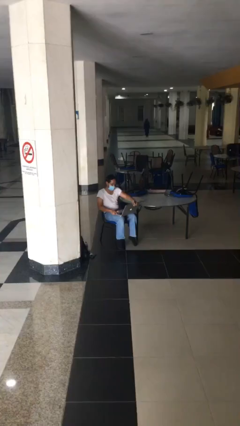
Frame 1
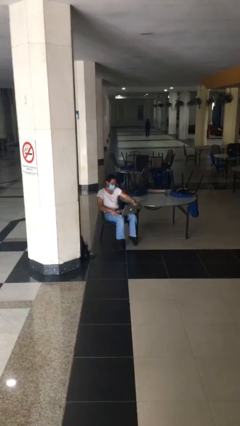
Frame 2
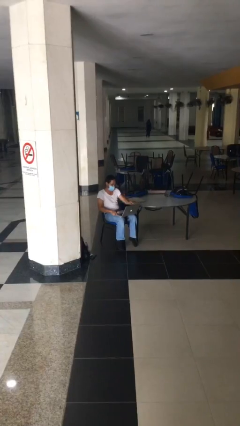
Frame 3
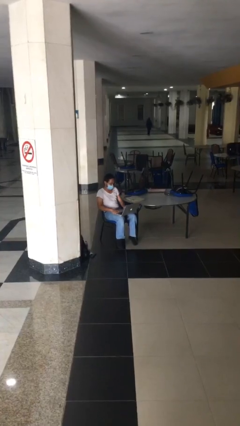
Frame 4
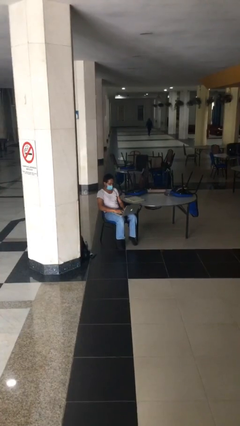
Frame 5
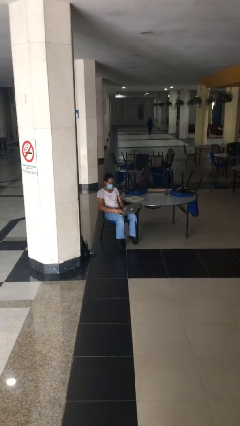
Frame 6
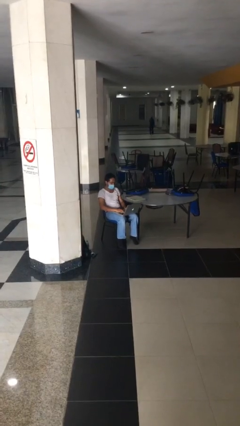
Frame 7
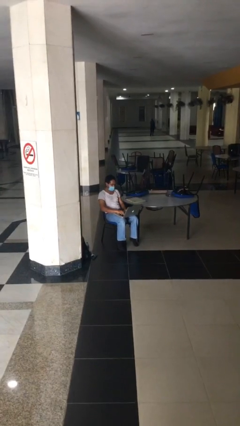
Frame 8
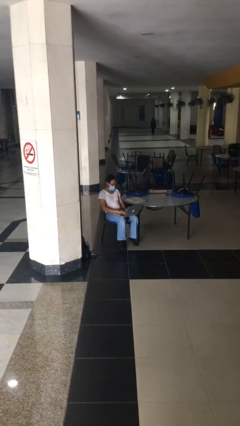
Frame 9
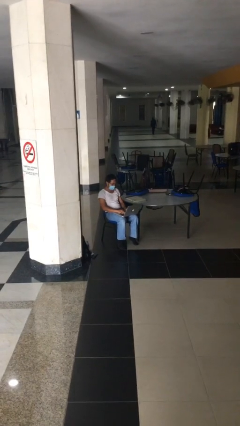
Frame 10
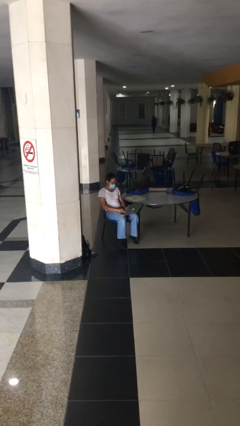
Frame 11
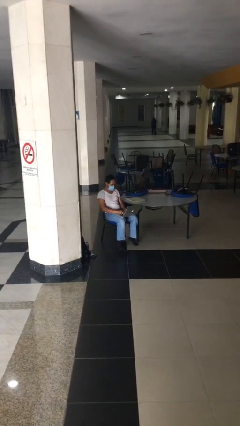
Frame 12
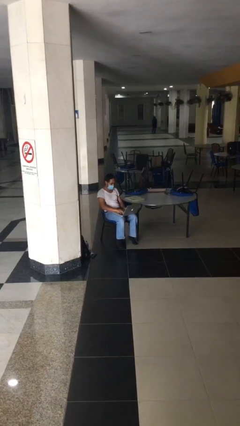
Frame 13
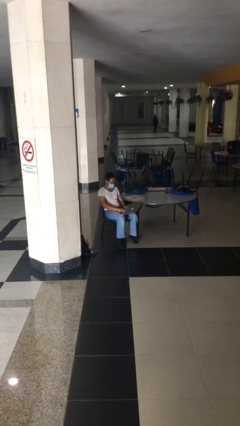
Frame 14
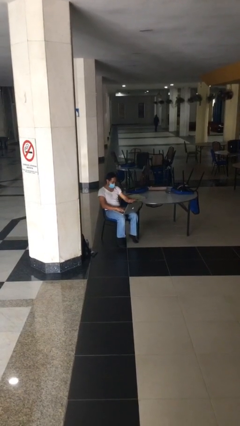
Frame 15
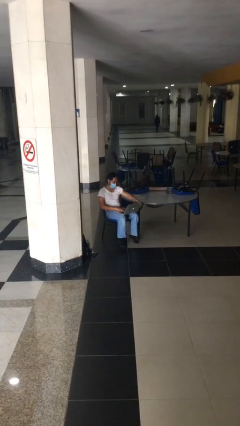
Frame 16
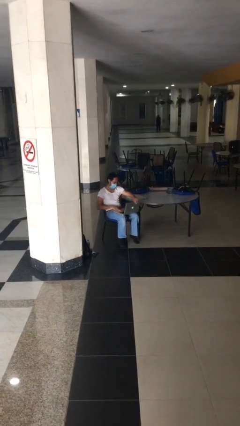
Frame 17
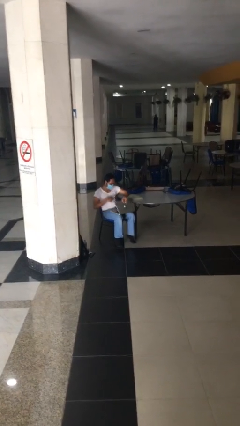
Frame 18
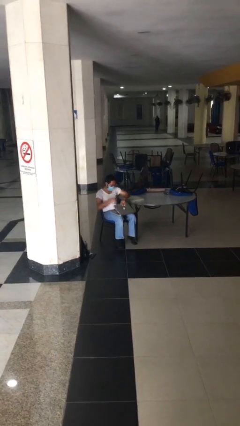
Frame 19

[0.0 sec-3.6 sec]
person interacts with laptop

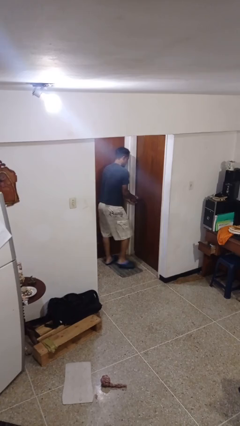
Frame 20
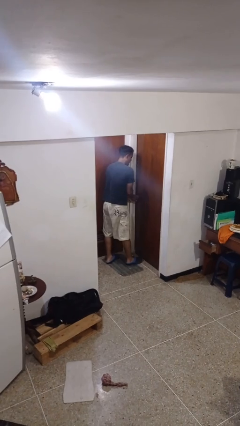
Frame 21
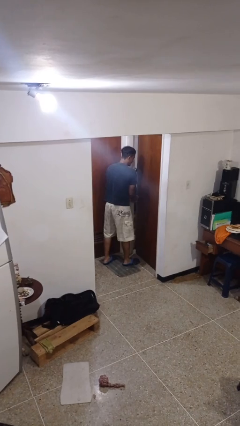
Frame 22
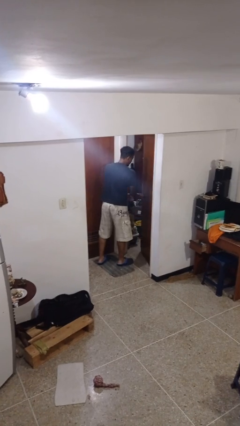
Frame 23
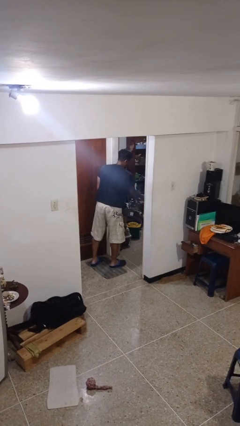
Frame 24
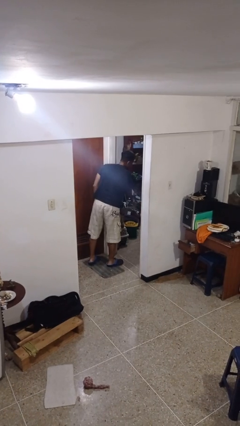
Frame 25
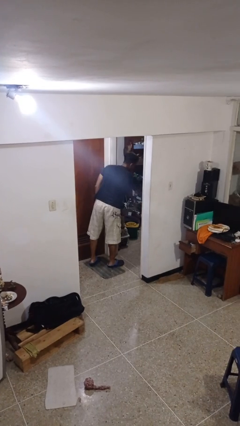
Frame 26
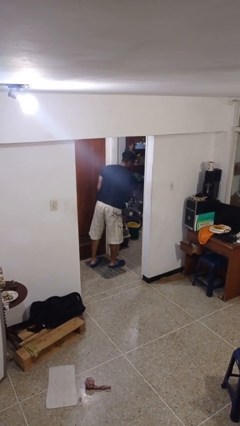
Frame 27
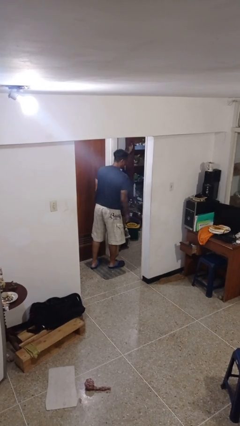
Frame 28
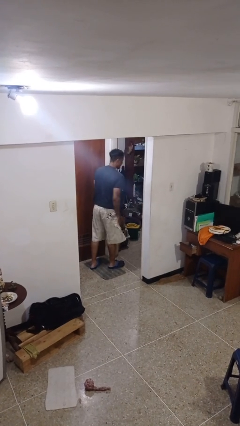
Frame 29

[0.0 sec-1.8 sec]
person opens facility door

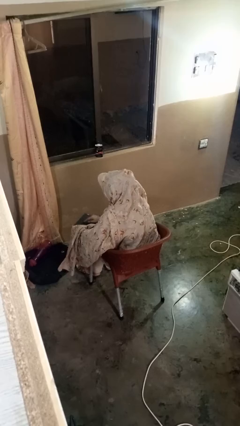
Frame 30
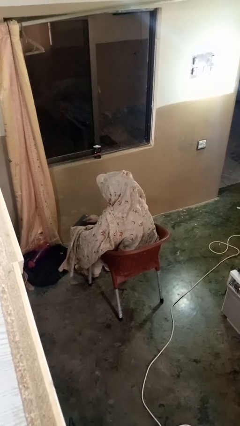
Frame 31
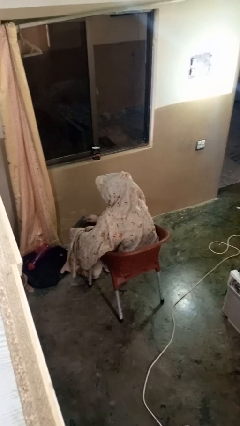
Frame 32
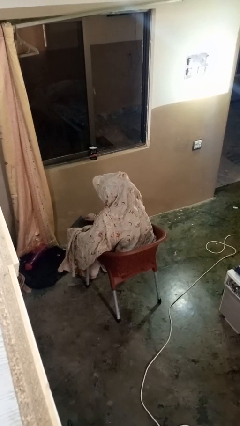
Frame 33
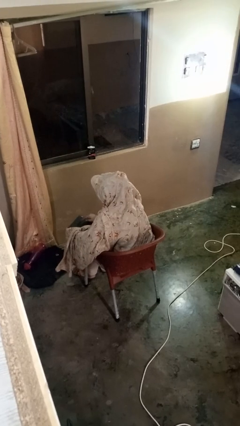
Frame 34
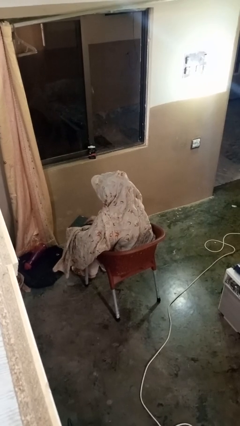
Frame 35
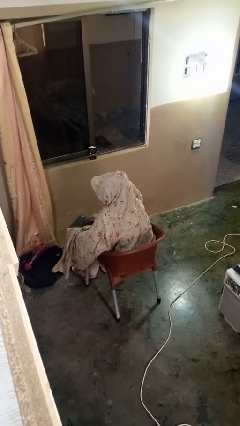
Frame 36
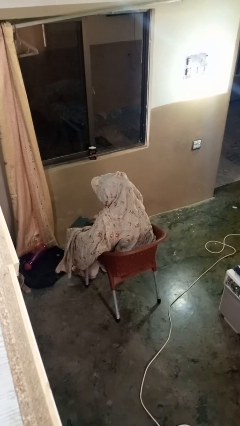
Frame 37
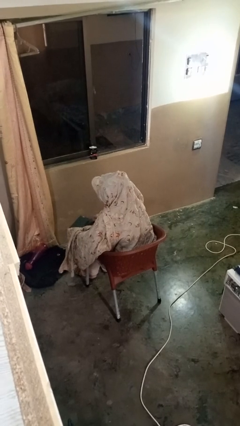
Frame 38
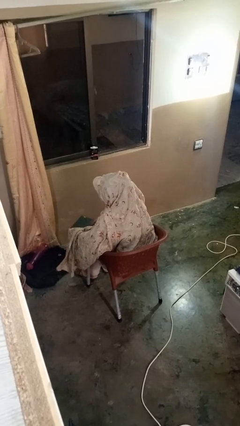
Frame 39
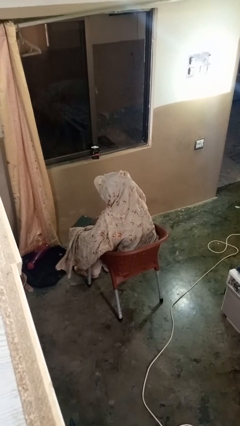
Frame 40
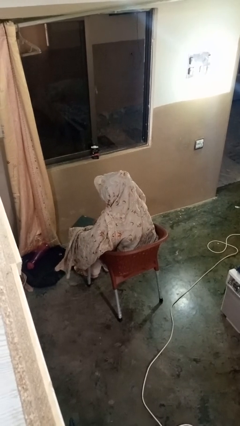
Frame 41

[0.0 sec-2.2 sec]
person interacts with tablet

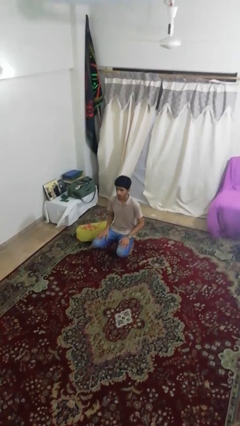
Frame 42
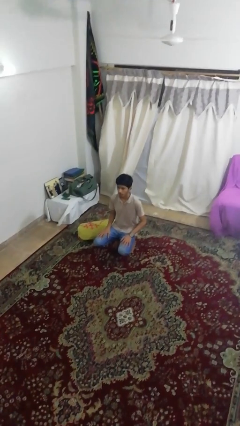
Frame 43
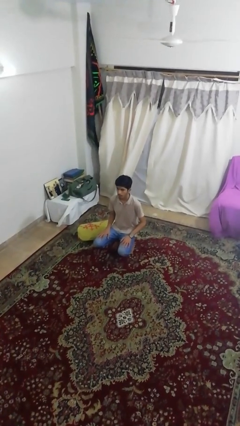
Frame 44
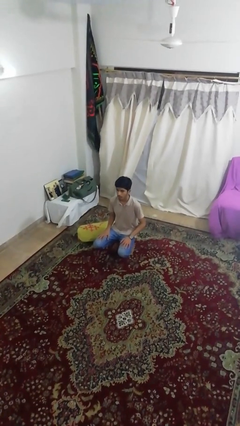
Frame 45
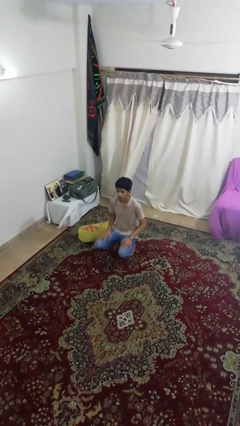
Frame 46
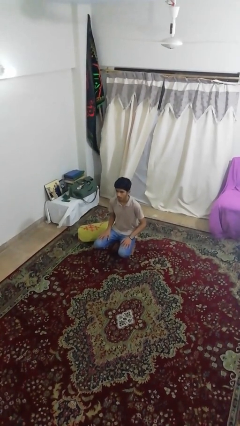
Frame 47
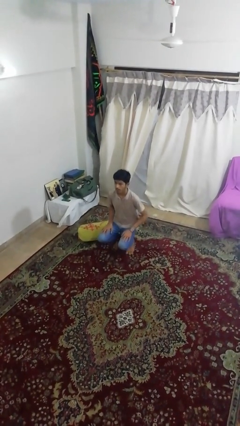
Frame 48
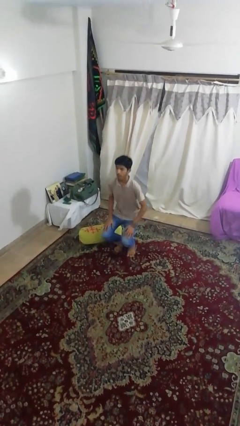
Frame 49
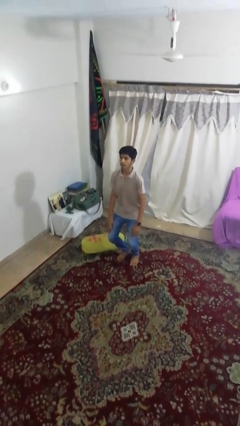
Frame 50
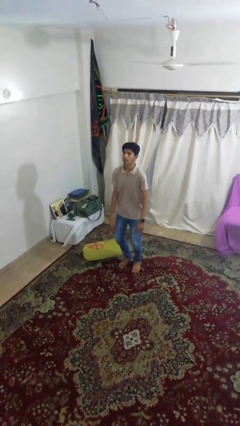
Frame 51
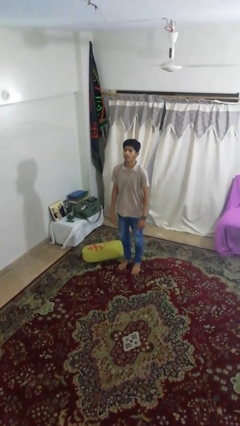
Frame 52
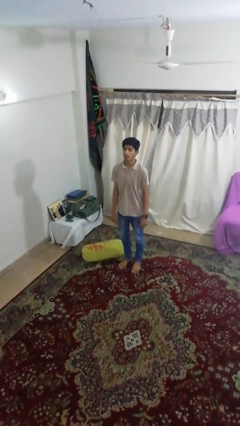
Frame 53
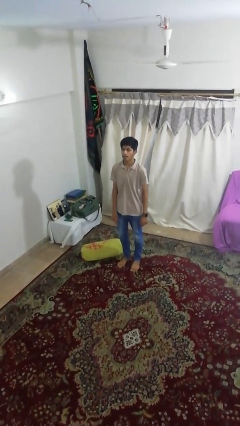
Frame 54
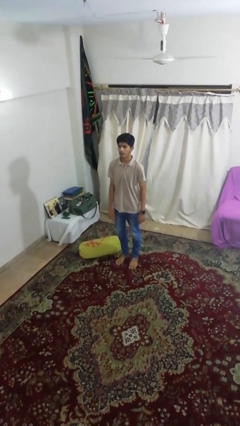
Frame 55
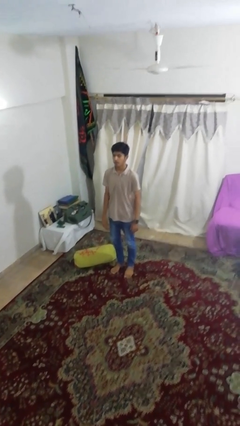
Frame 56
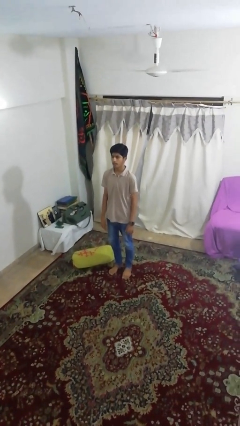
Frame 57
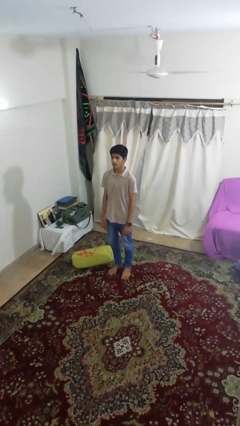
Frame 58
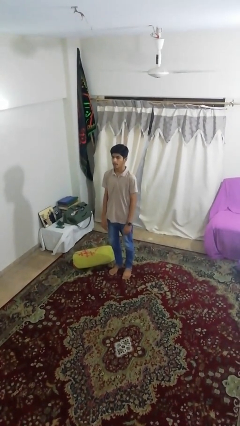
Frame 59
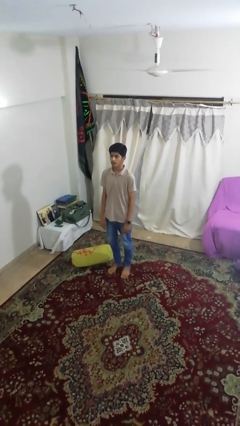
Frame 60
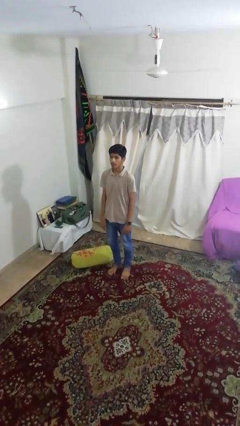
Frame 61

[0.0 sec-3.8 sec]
person stands up

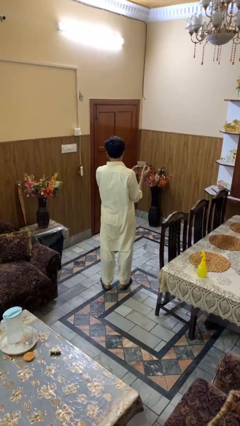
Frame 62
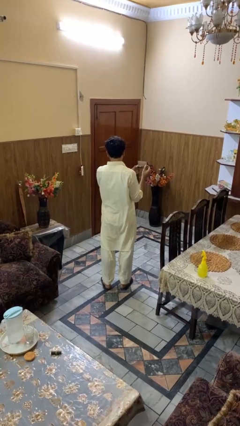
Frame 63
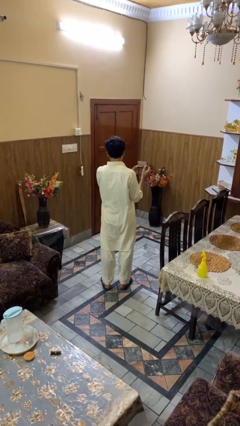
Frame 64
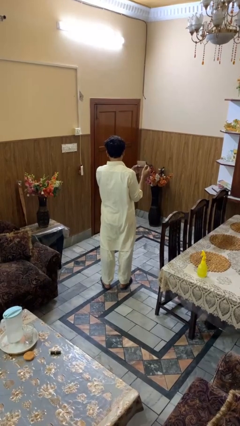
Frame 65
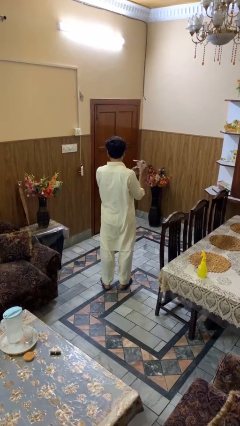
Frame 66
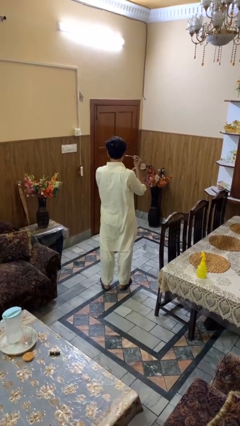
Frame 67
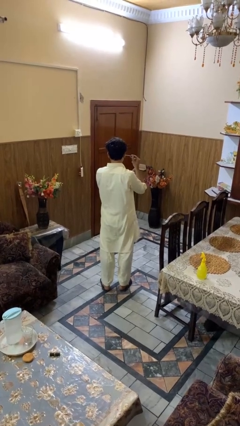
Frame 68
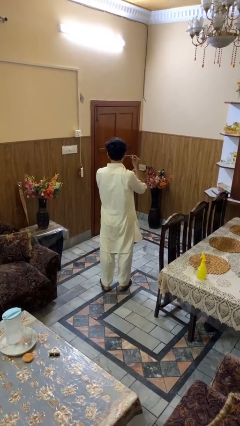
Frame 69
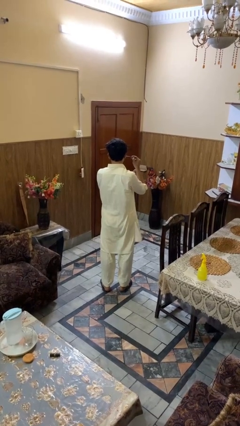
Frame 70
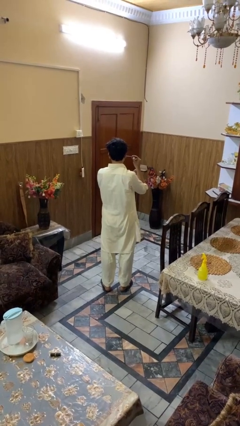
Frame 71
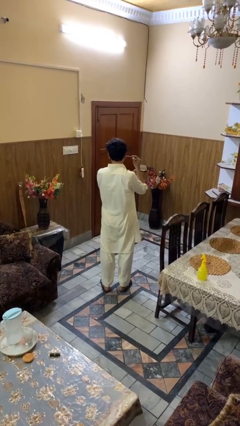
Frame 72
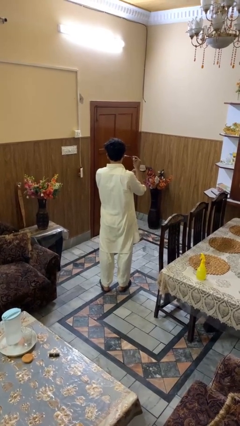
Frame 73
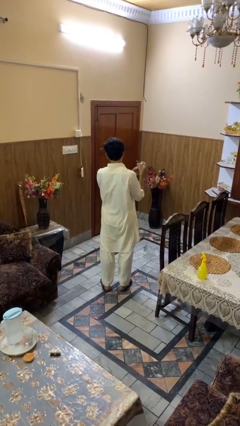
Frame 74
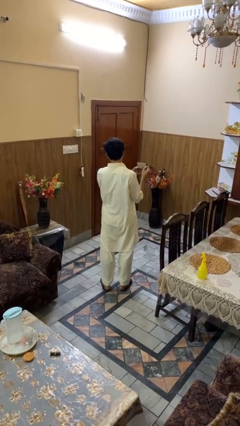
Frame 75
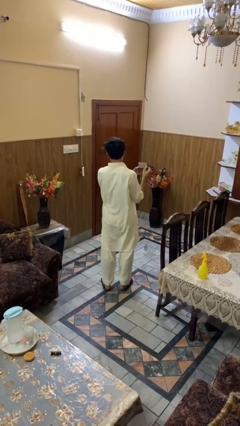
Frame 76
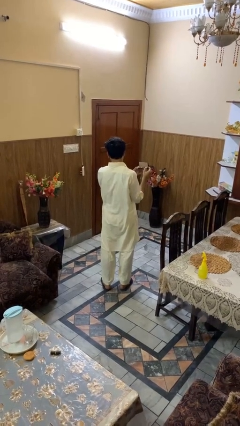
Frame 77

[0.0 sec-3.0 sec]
person applies eye makeup

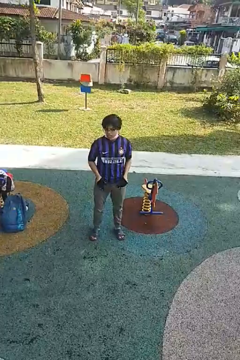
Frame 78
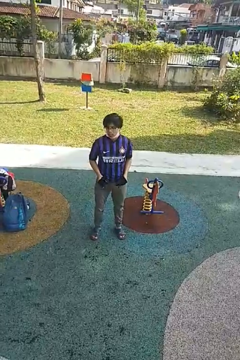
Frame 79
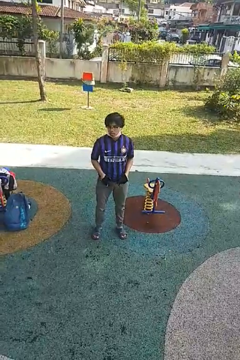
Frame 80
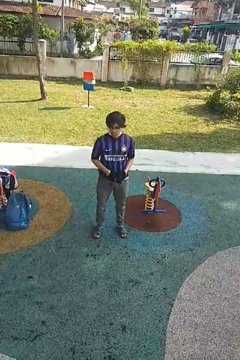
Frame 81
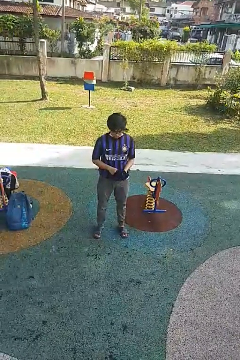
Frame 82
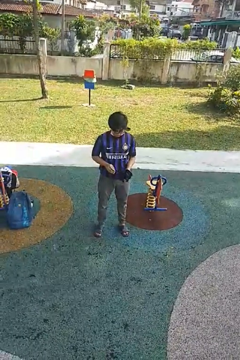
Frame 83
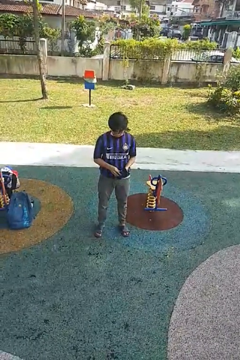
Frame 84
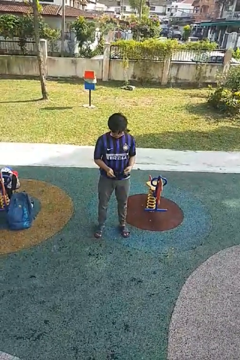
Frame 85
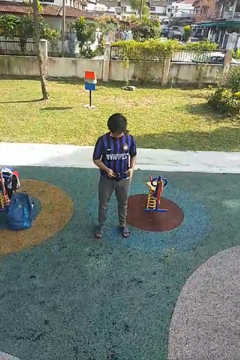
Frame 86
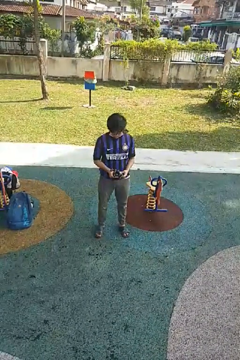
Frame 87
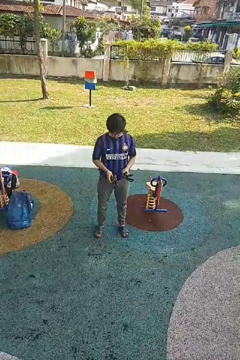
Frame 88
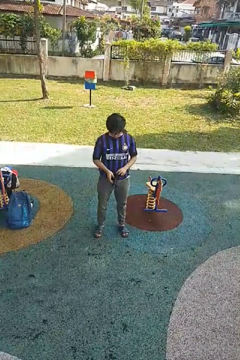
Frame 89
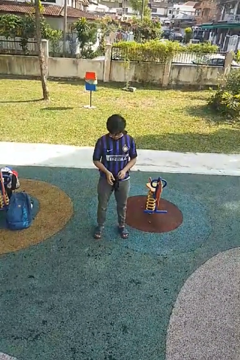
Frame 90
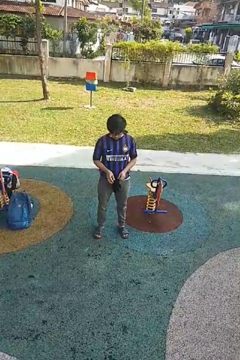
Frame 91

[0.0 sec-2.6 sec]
person takes off gloves

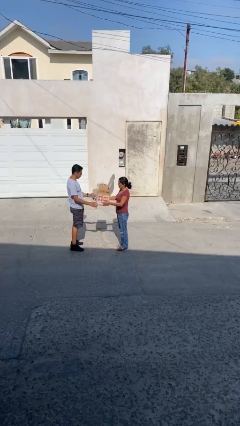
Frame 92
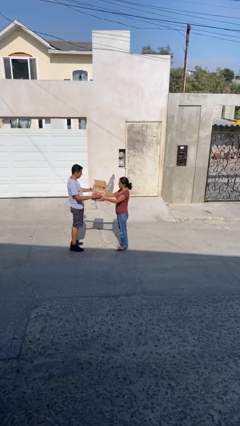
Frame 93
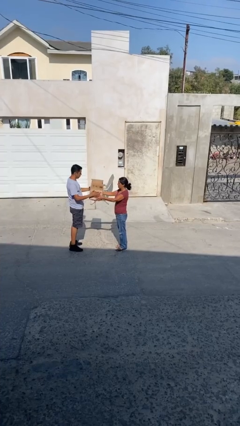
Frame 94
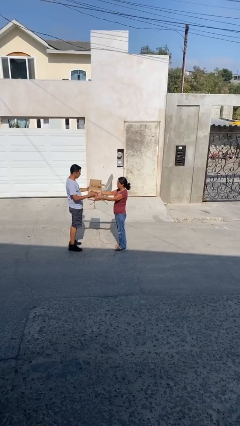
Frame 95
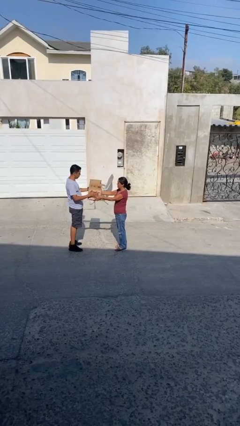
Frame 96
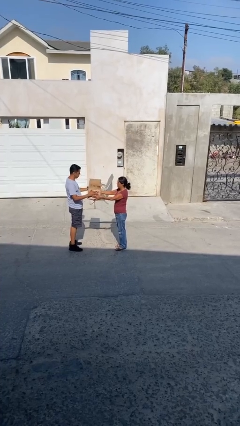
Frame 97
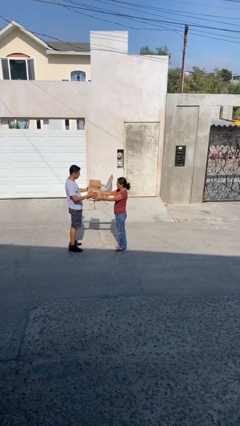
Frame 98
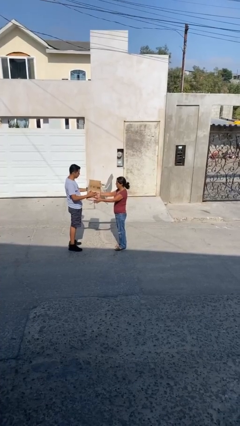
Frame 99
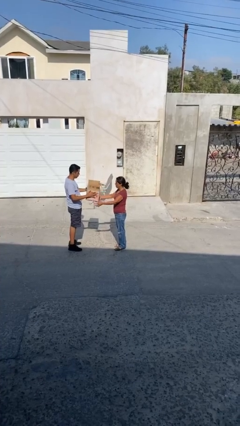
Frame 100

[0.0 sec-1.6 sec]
person transfers object to person
